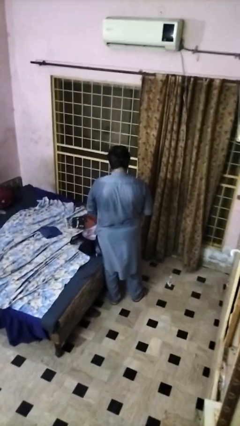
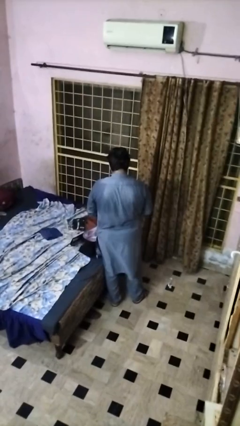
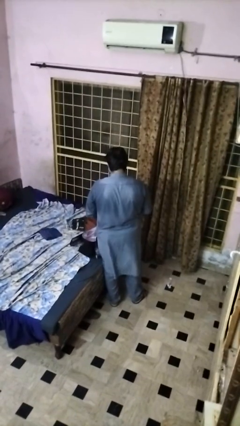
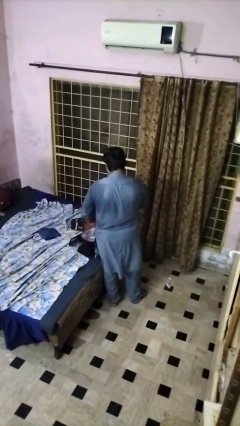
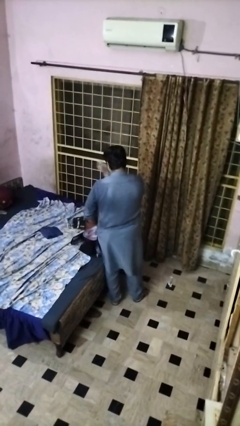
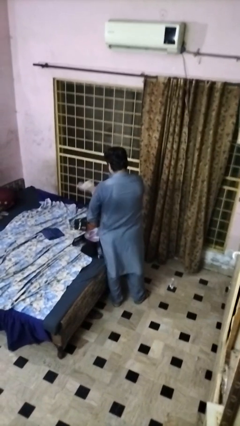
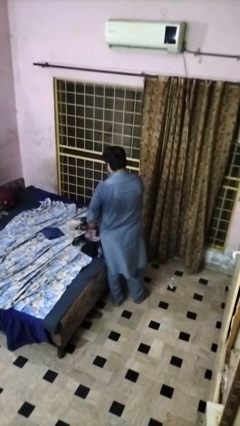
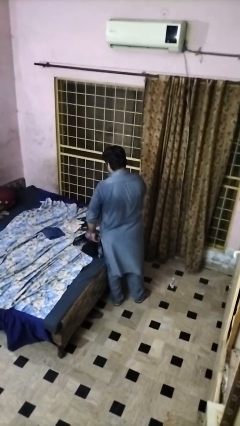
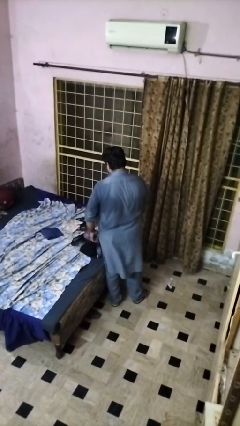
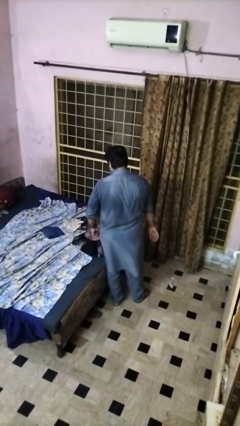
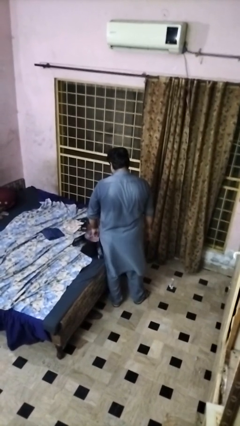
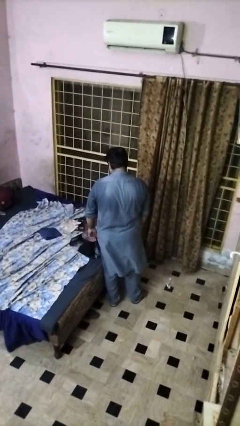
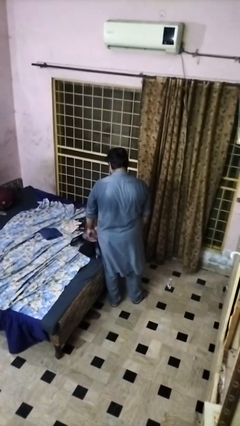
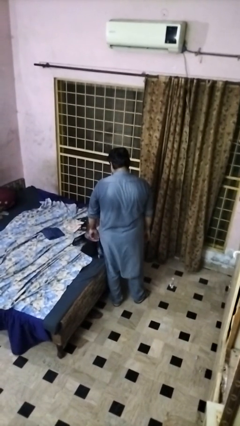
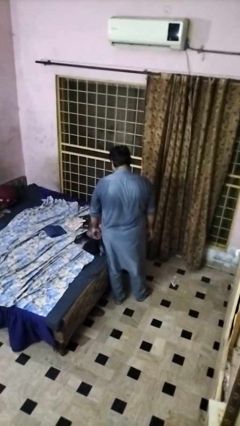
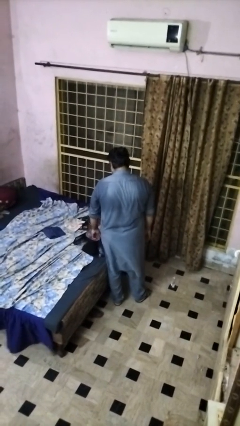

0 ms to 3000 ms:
person unloads clothes from suitcase

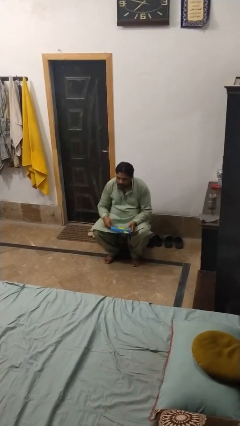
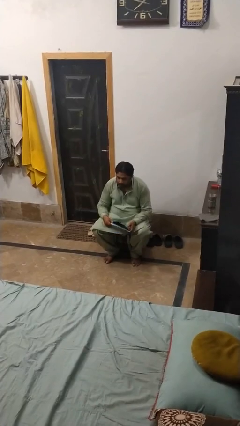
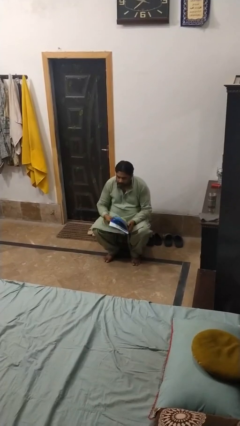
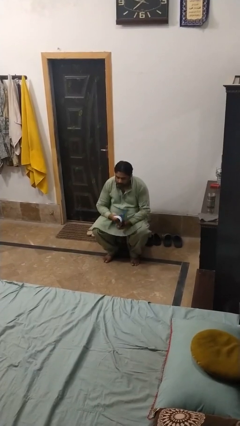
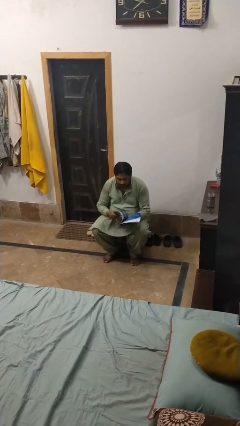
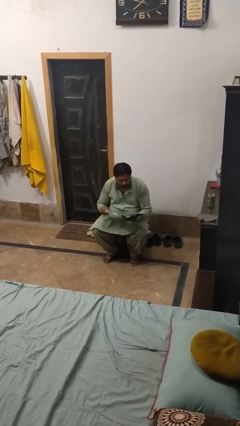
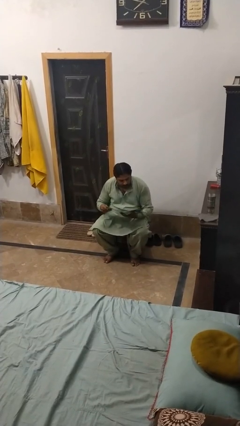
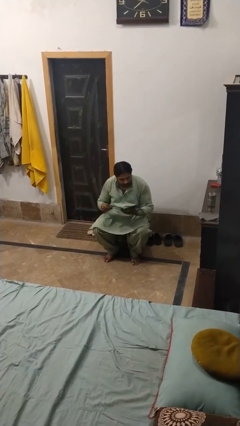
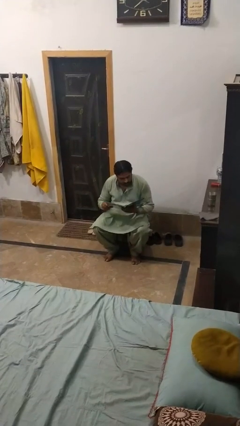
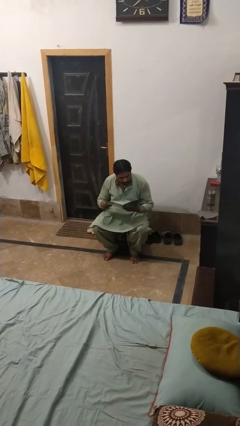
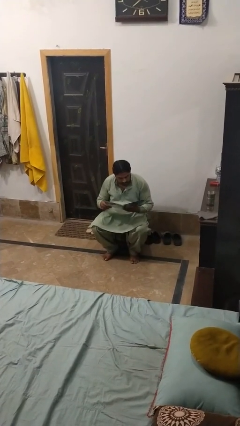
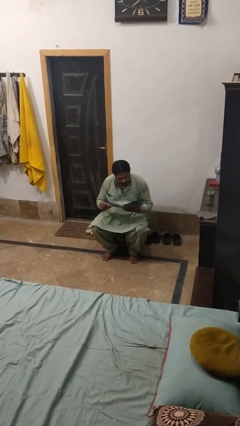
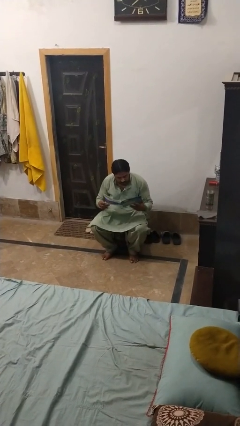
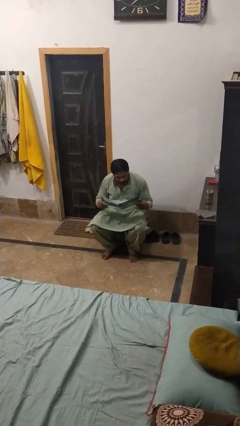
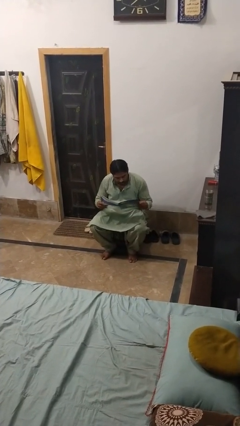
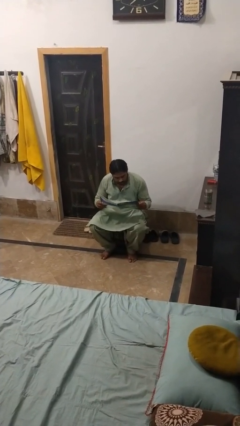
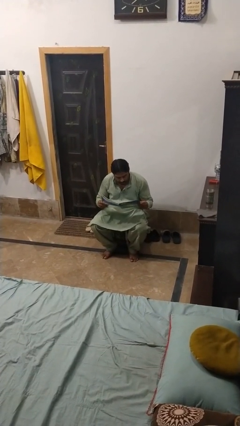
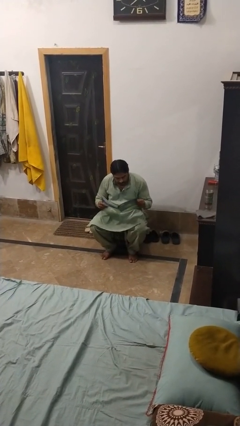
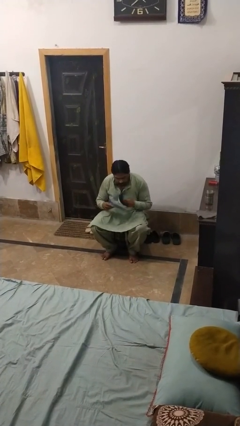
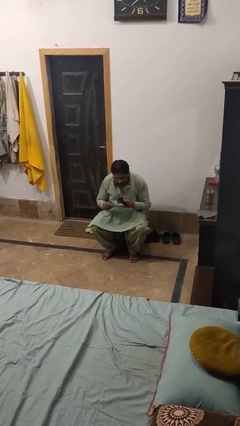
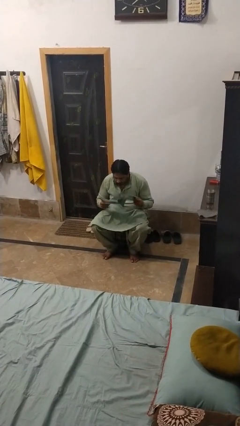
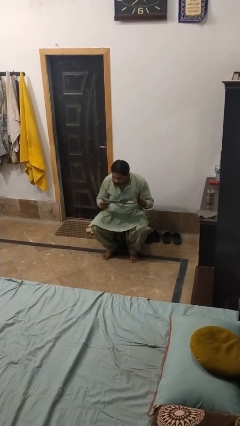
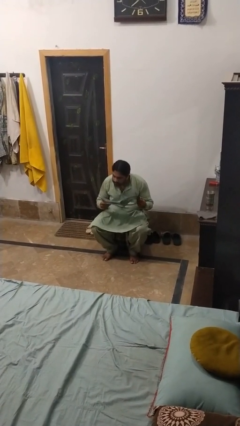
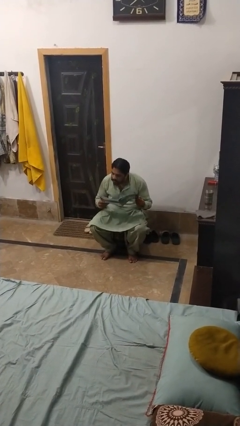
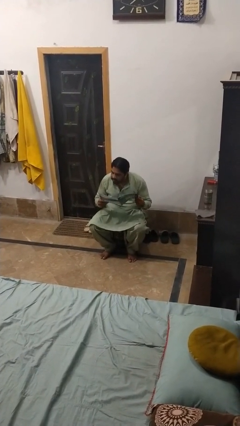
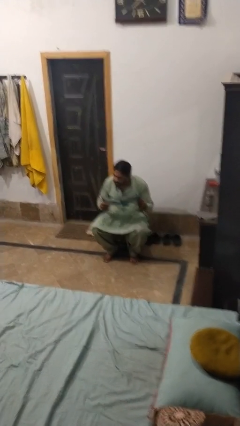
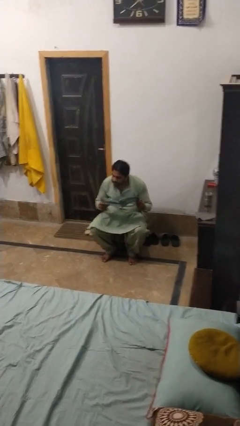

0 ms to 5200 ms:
person reads magazine

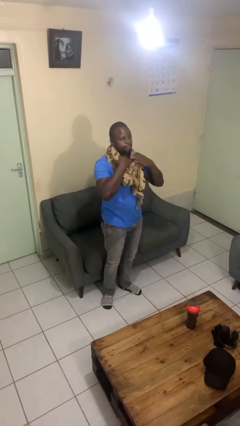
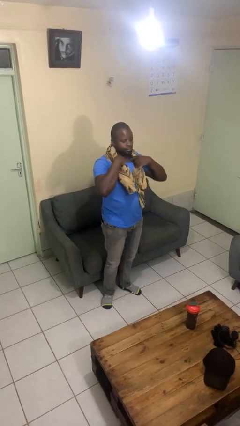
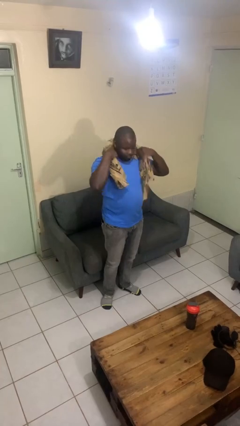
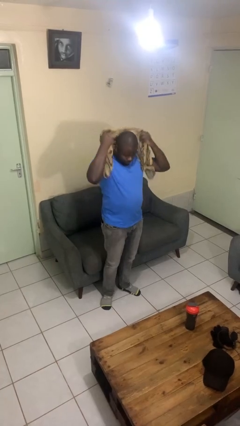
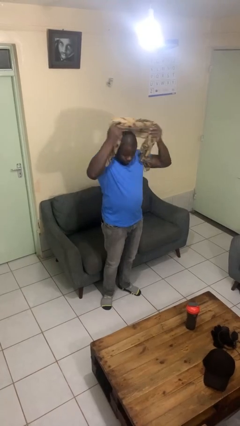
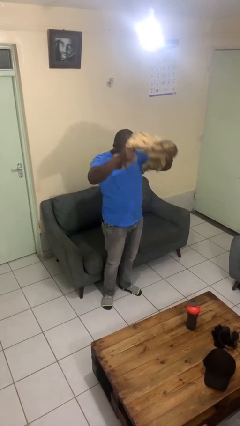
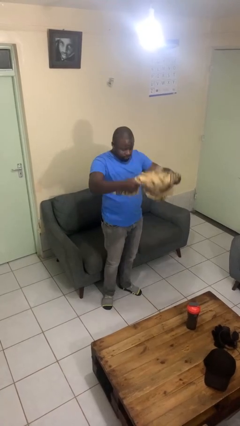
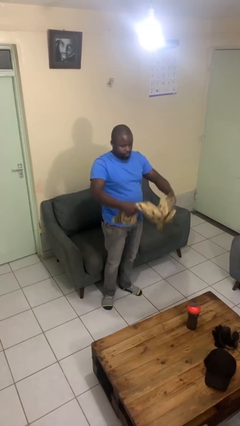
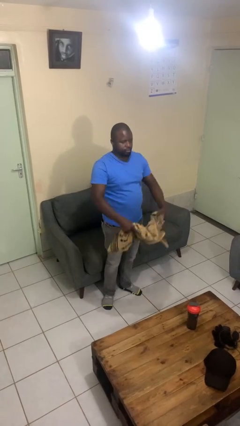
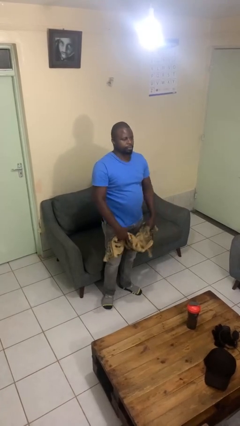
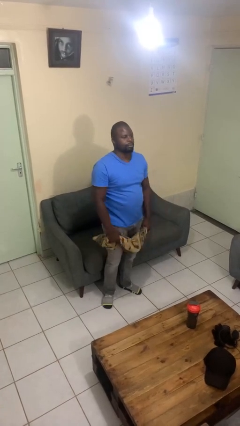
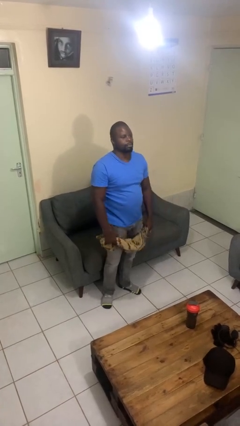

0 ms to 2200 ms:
person takes off scarf

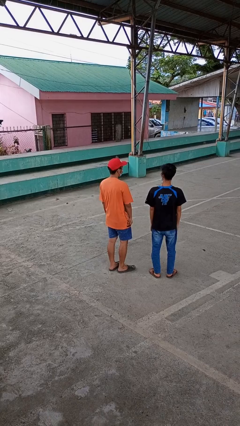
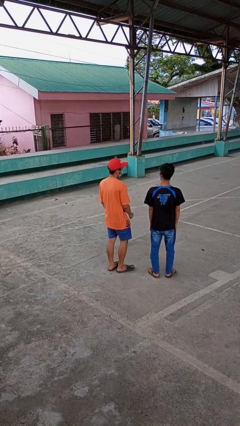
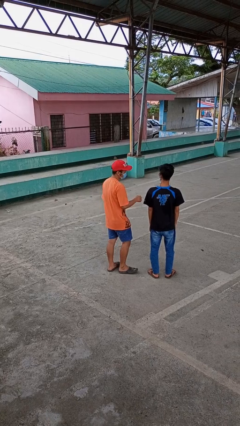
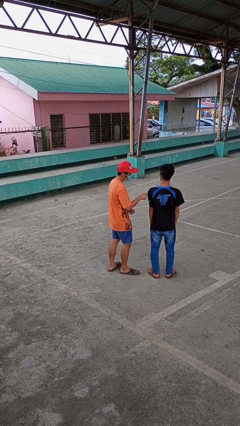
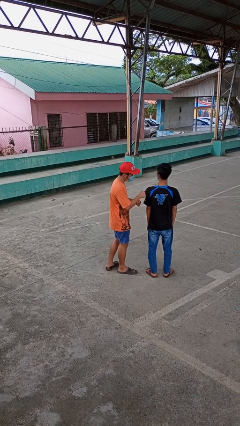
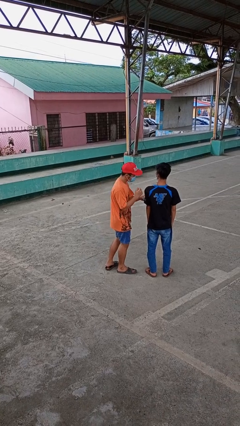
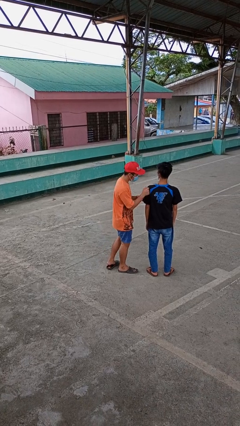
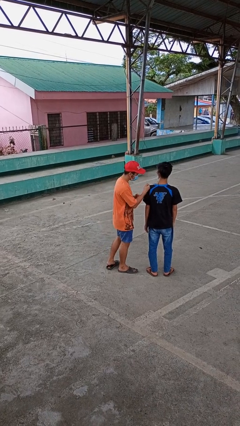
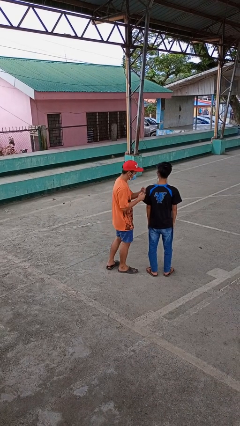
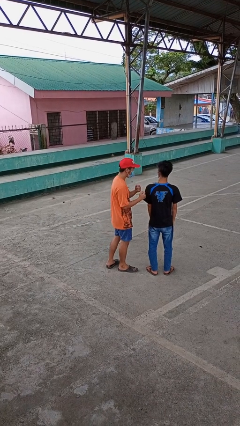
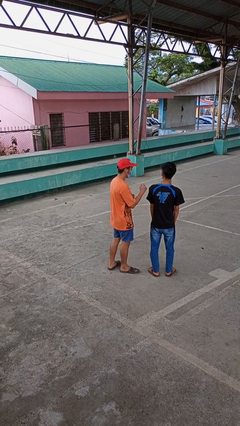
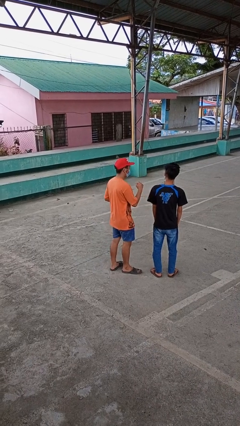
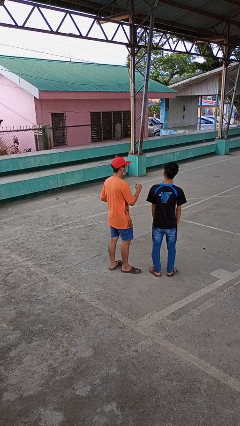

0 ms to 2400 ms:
person pounds shoulders of person

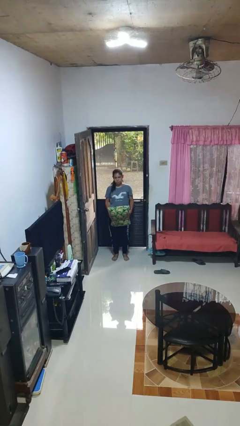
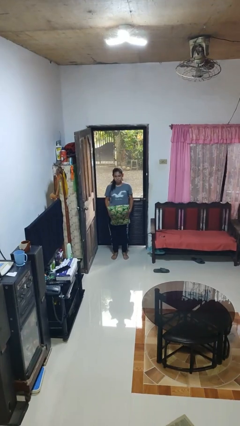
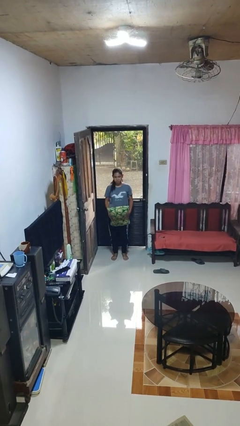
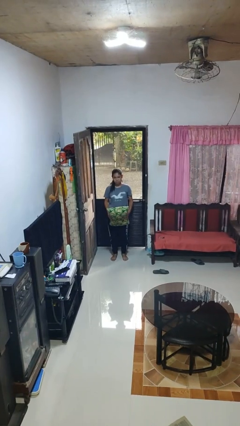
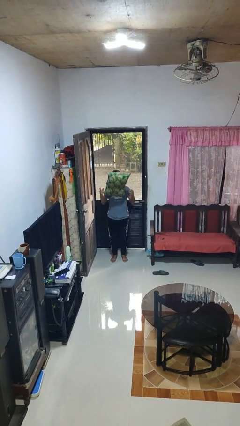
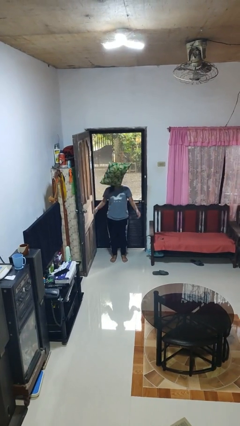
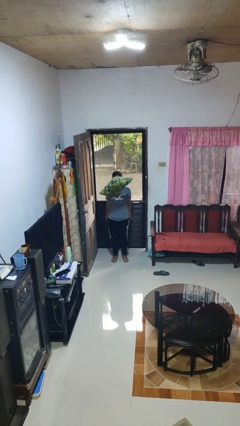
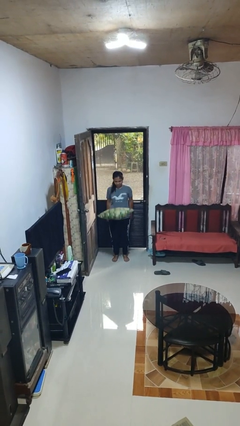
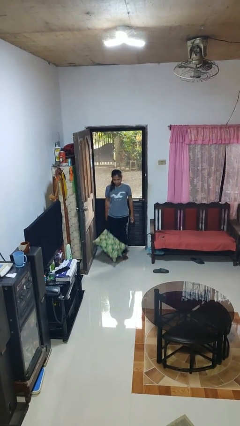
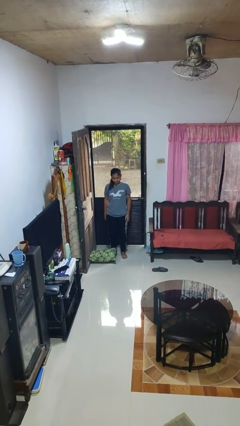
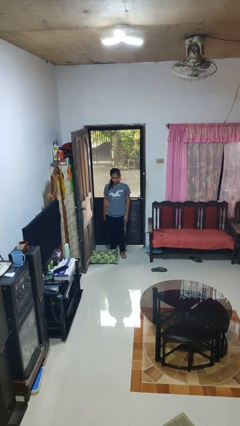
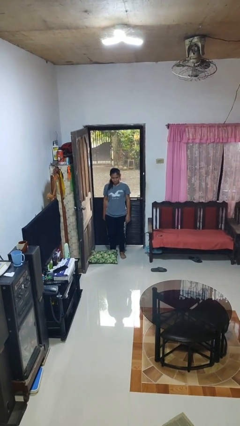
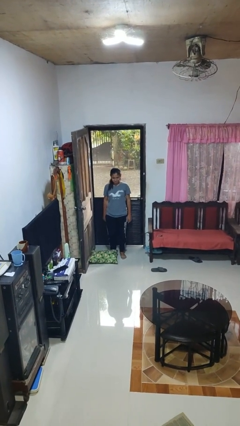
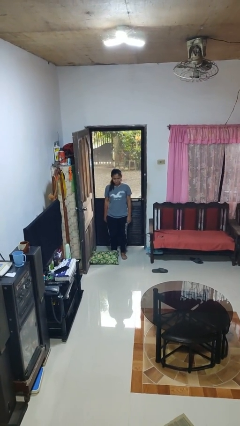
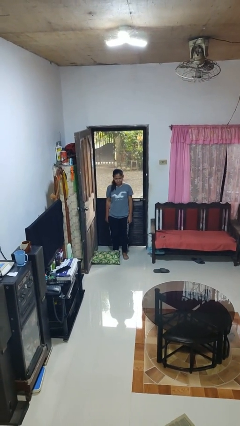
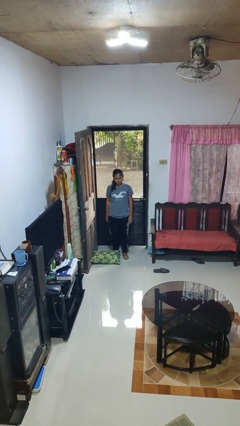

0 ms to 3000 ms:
person throws object into air

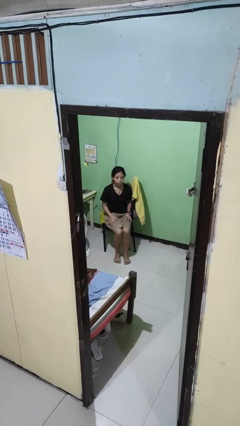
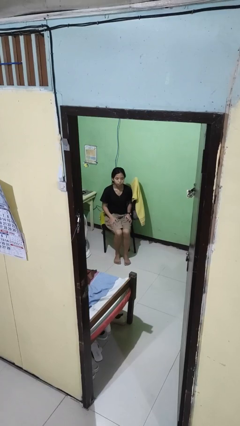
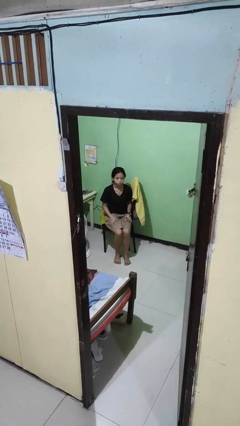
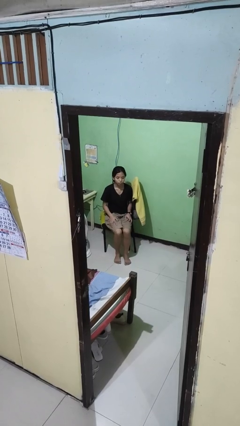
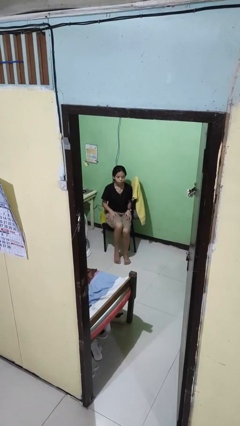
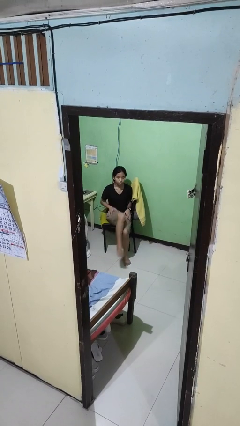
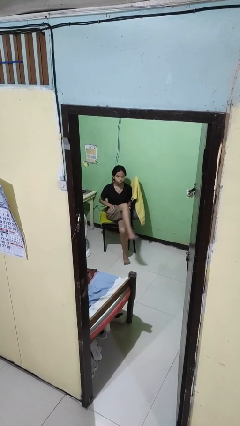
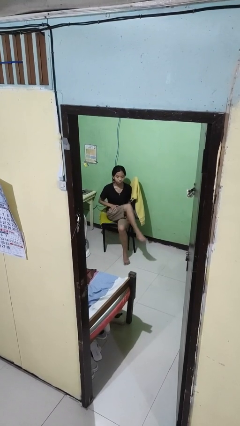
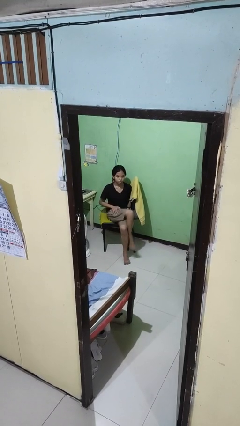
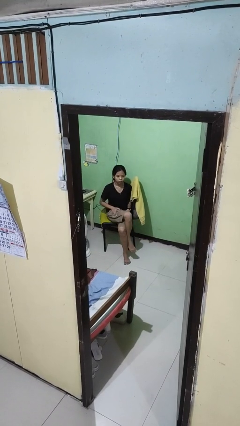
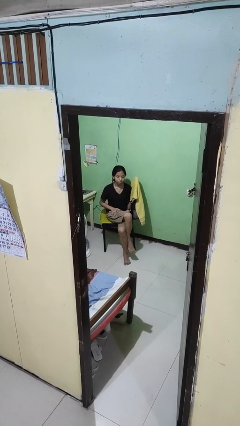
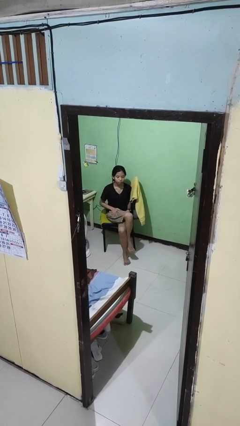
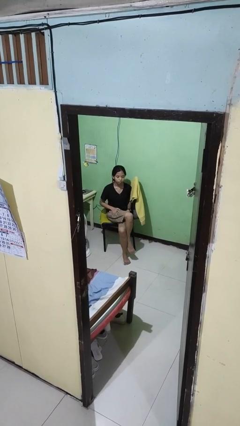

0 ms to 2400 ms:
person crosses legs
